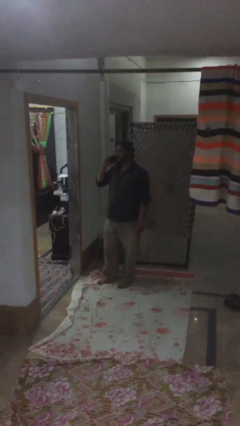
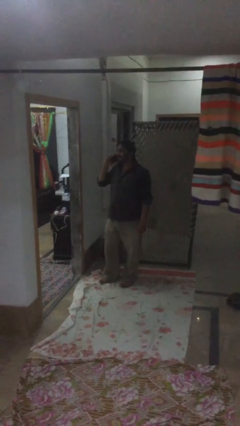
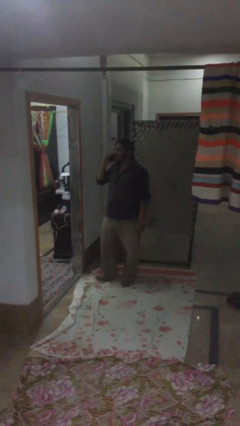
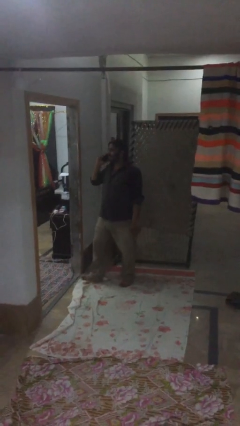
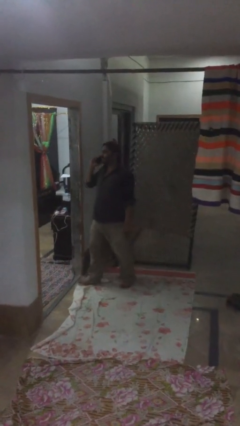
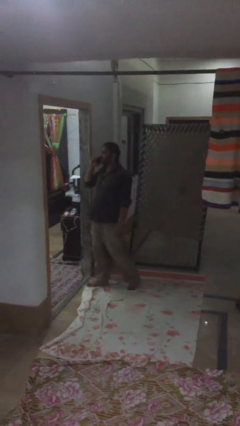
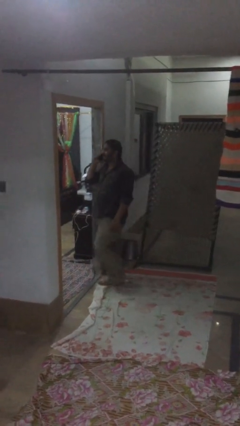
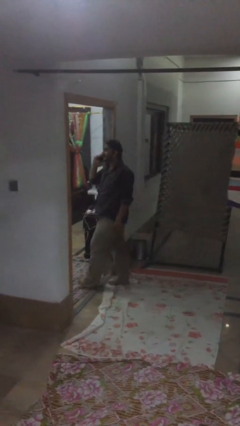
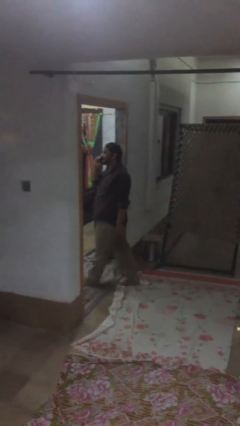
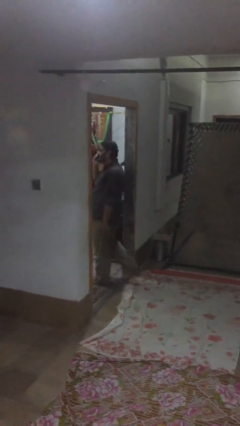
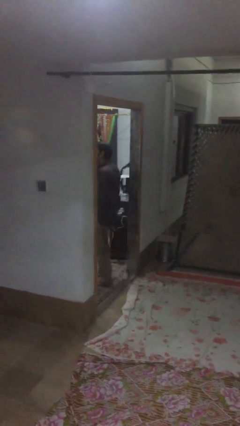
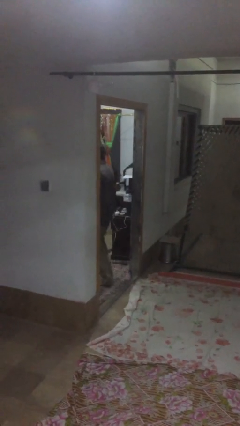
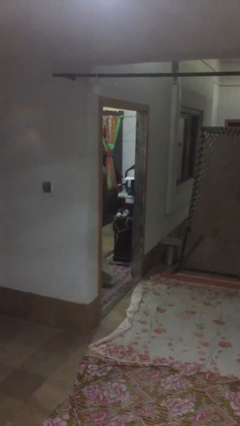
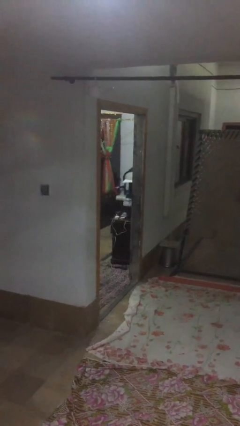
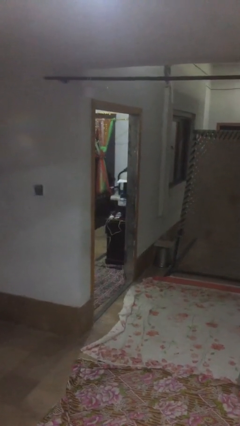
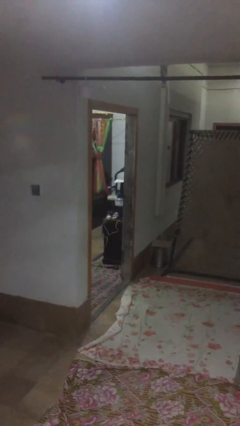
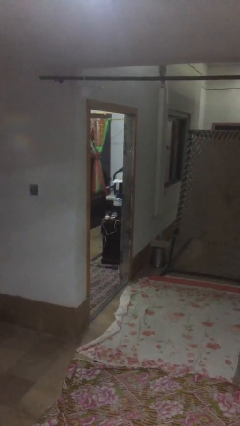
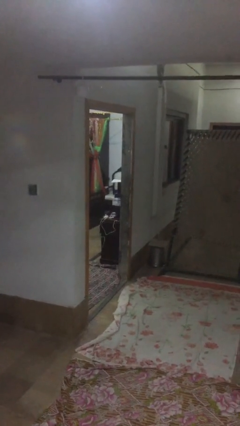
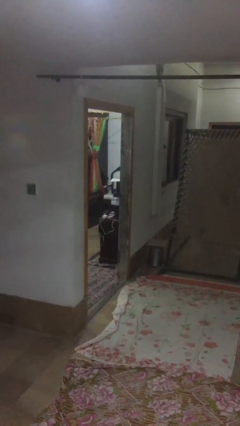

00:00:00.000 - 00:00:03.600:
person exits scene through structure

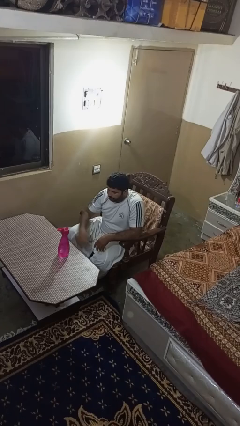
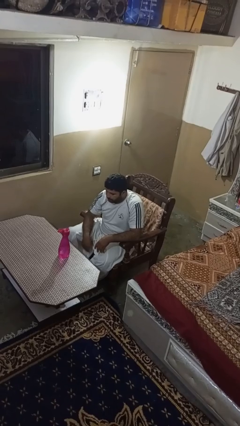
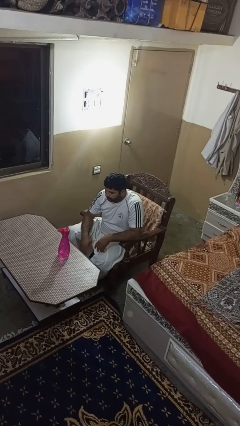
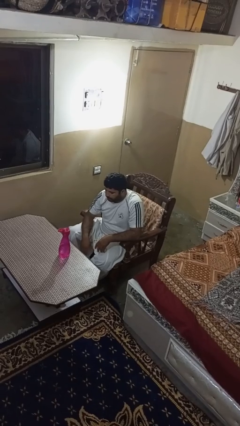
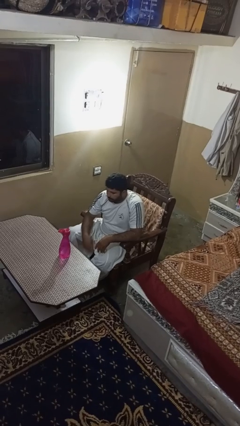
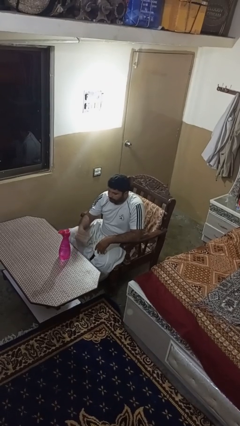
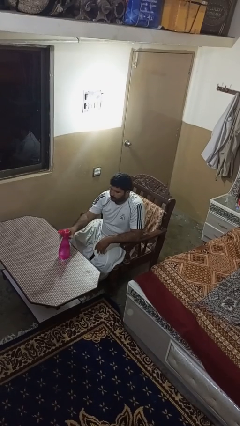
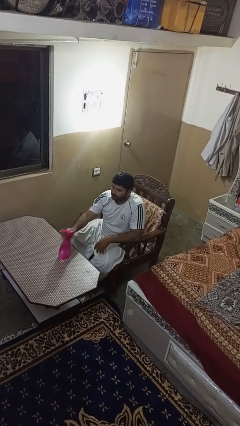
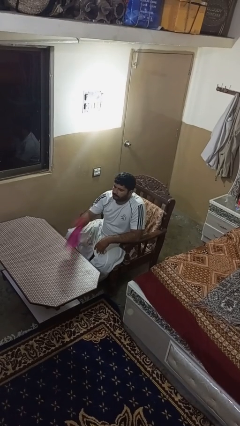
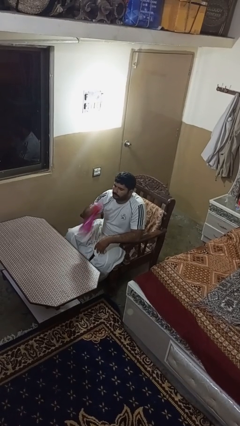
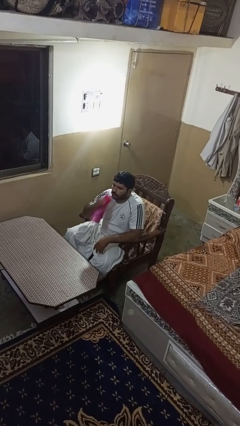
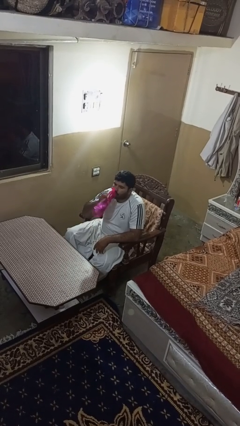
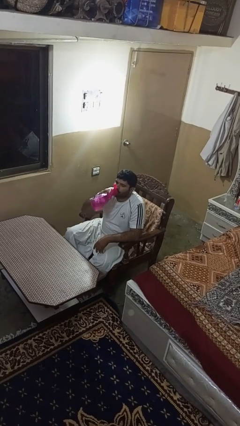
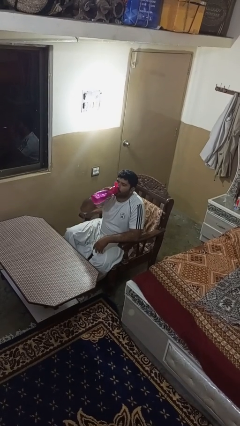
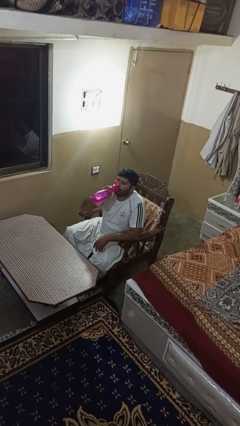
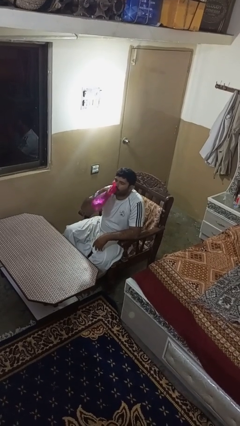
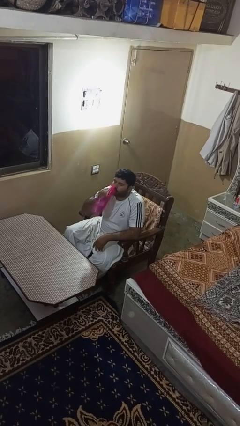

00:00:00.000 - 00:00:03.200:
person drinks from bottle

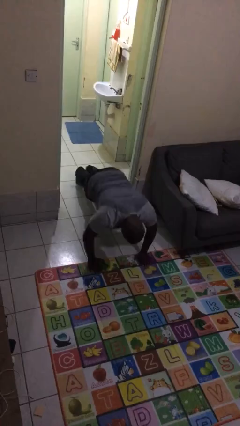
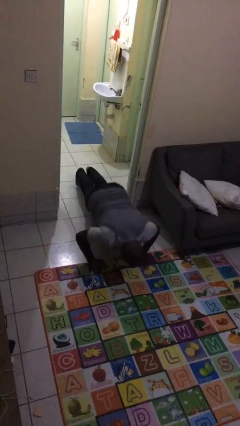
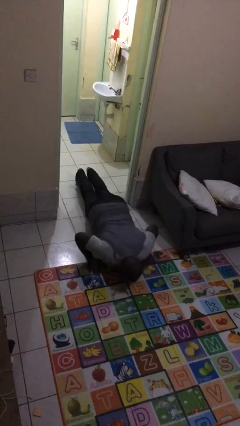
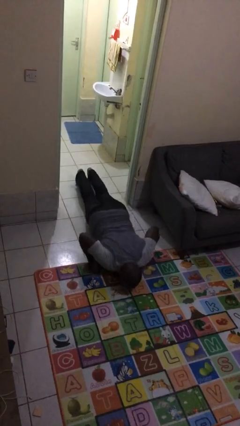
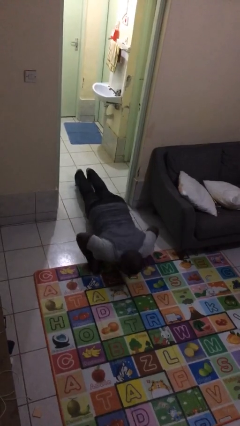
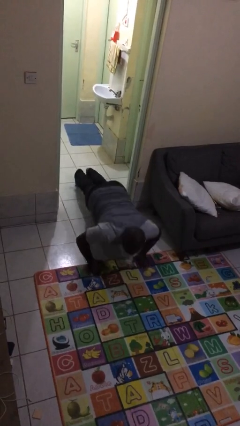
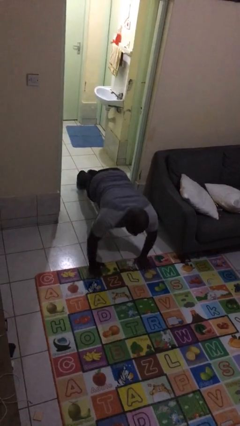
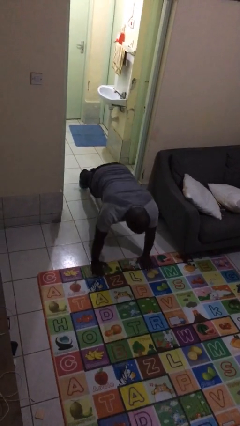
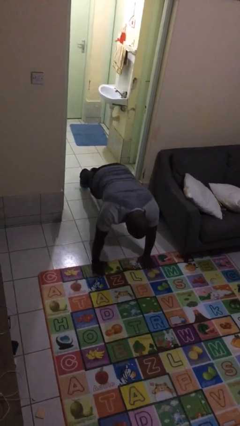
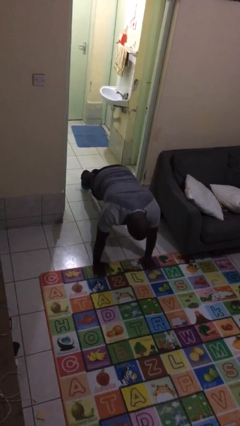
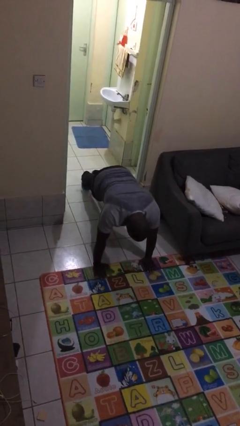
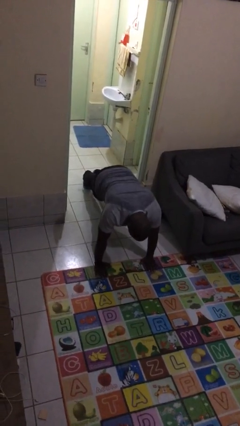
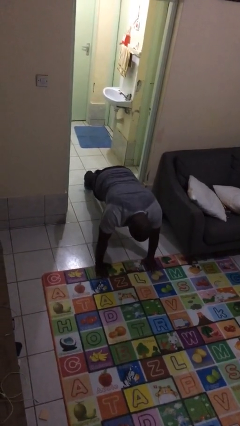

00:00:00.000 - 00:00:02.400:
person exercises with pushup

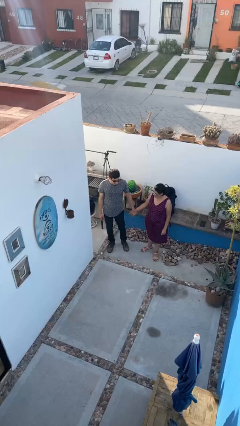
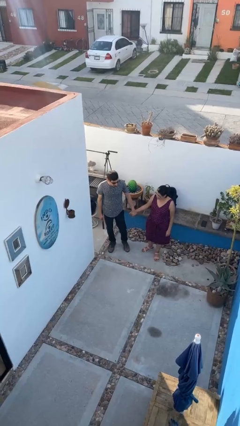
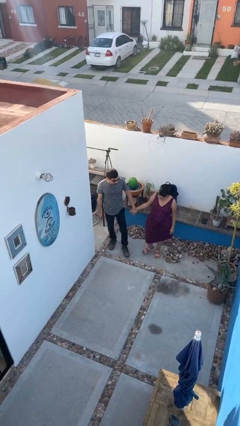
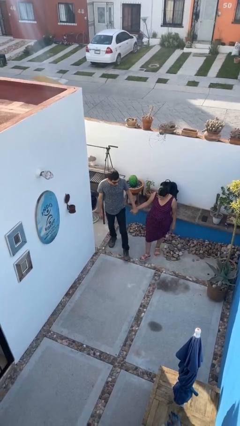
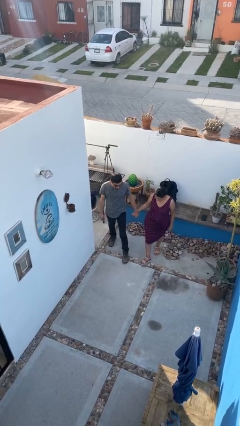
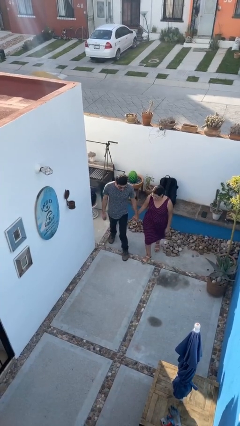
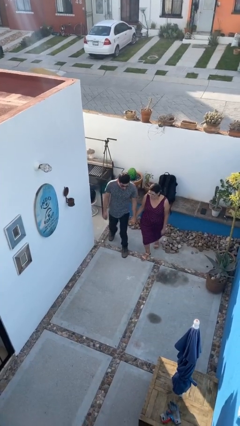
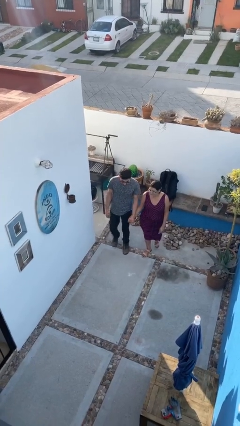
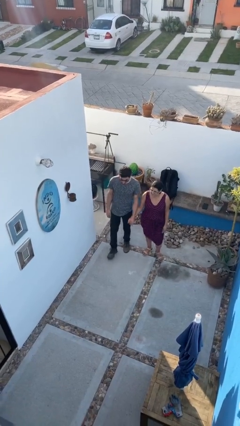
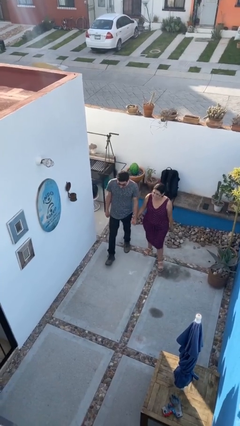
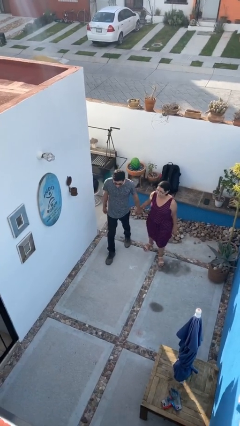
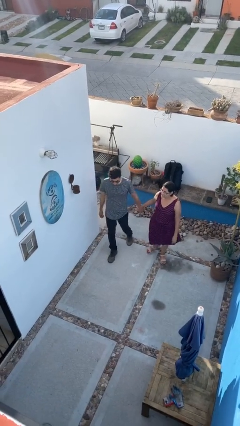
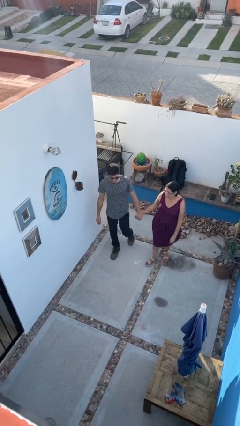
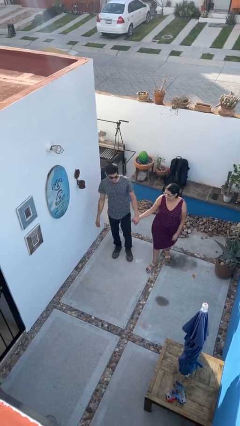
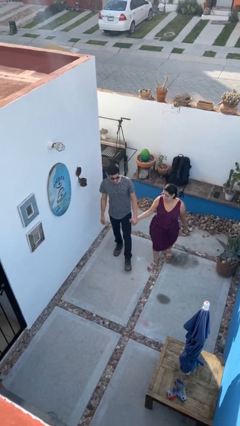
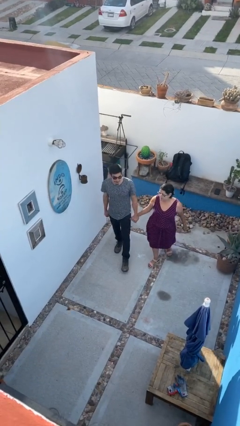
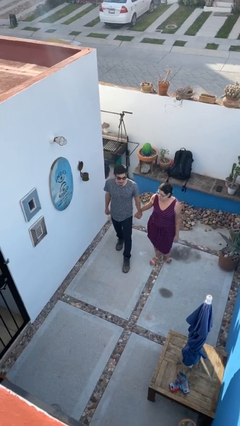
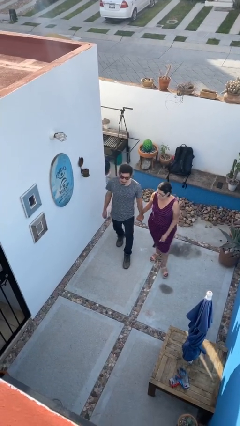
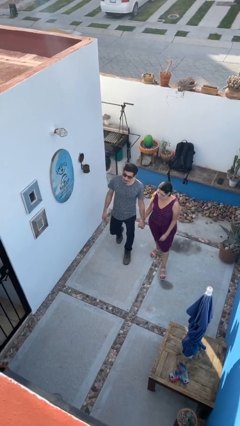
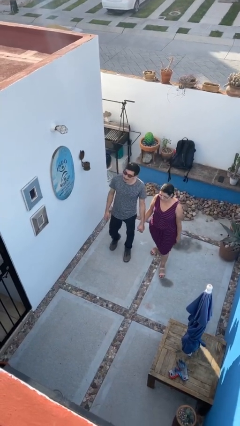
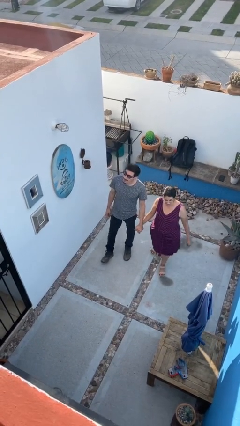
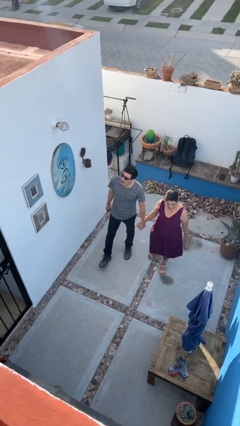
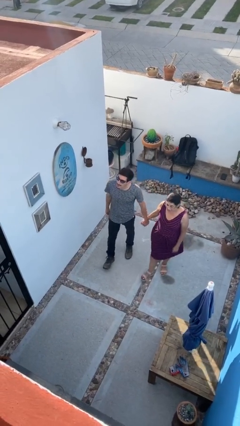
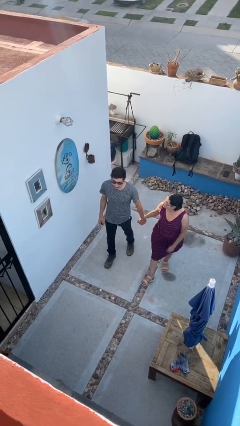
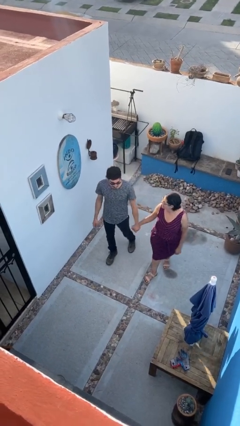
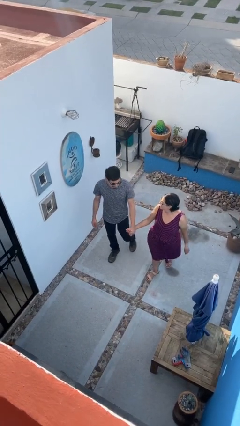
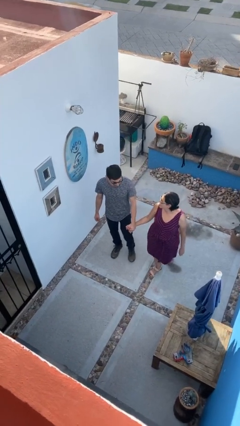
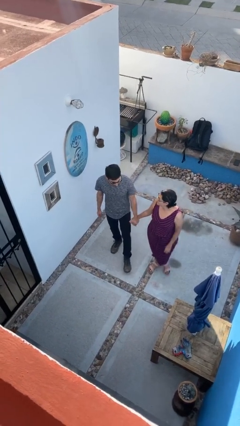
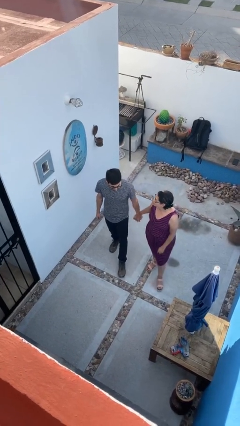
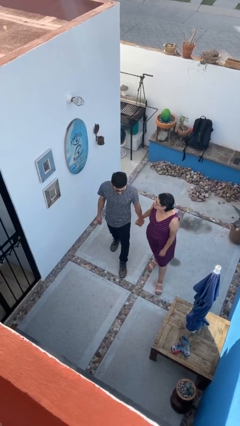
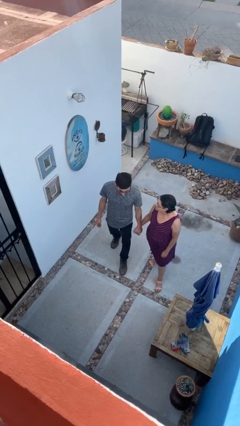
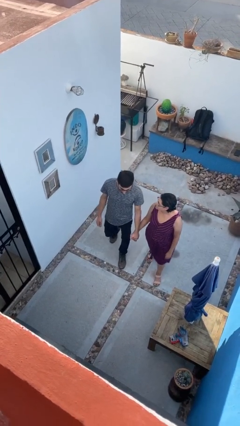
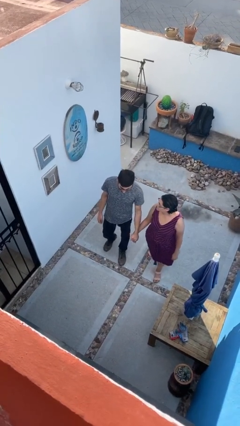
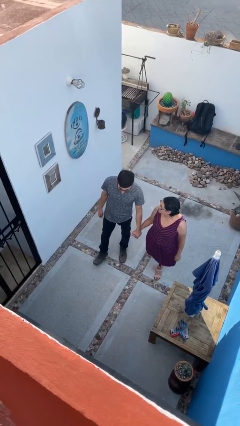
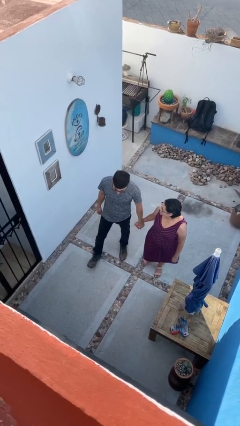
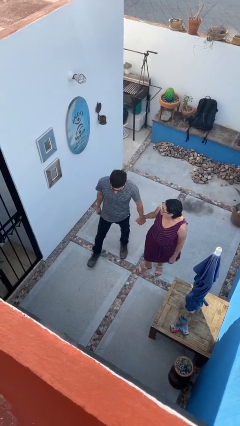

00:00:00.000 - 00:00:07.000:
person holds hand

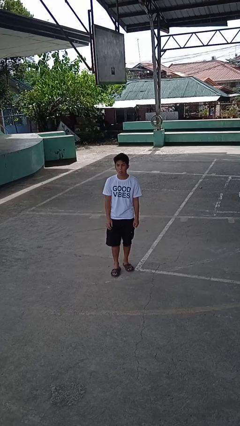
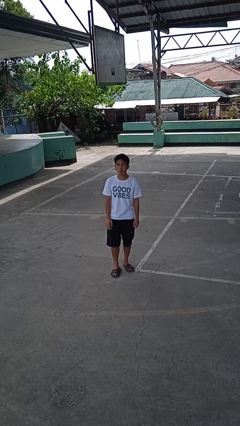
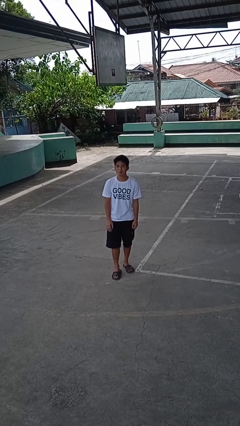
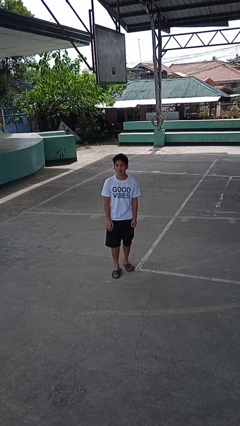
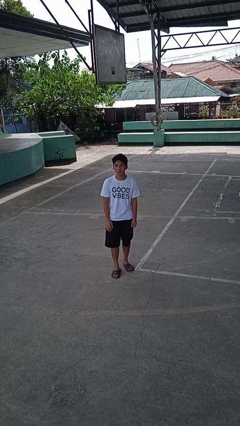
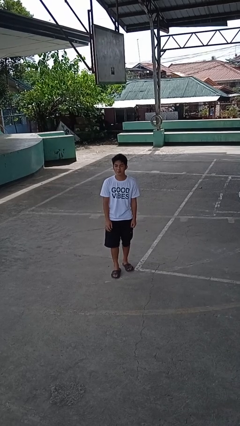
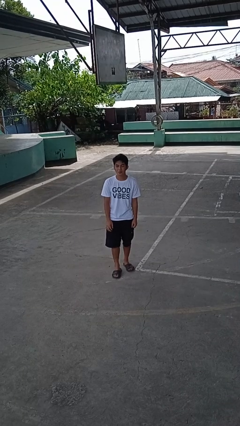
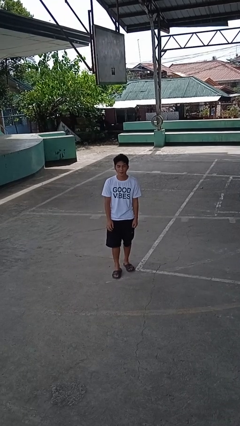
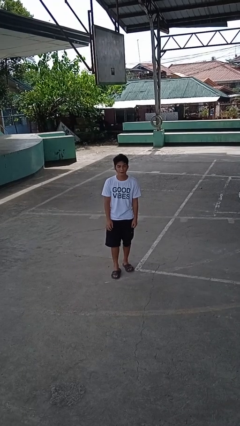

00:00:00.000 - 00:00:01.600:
person sticks out tongue
